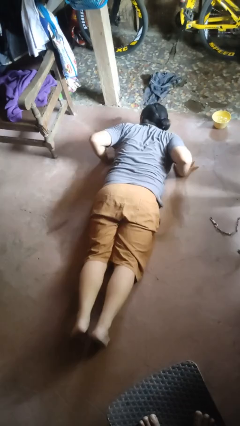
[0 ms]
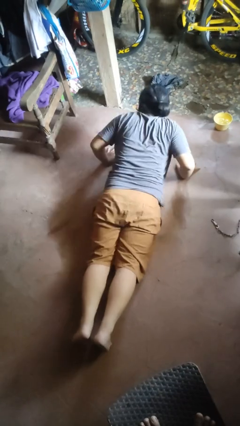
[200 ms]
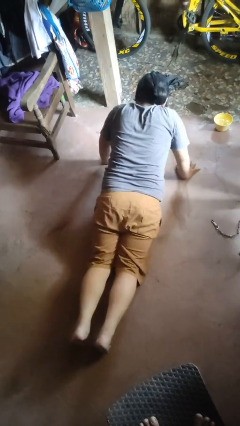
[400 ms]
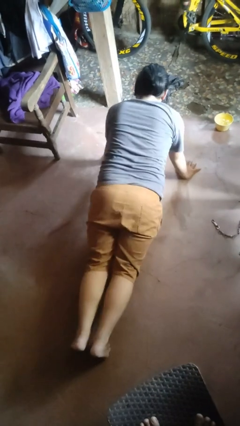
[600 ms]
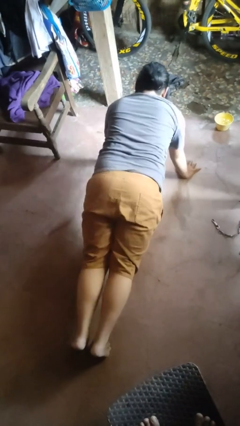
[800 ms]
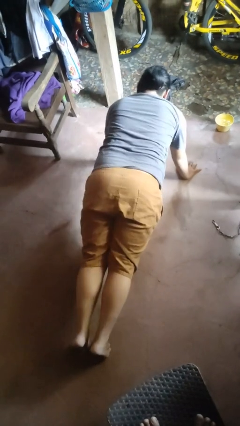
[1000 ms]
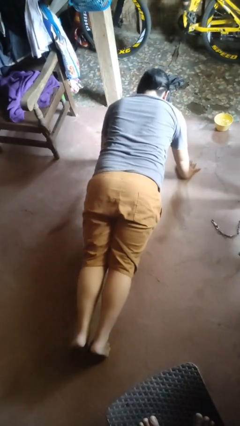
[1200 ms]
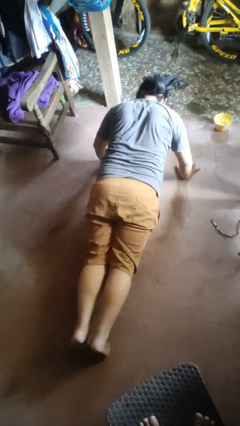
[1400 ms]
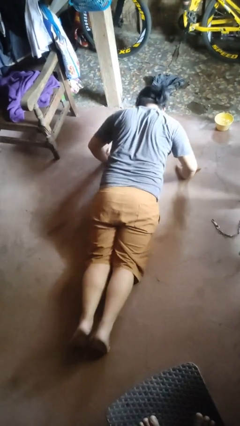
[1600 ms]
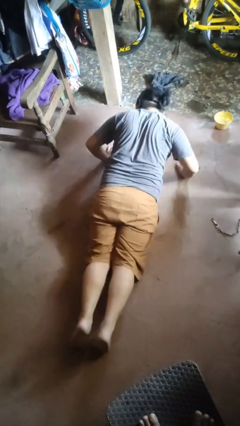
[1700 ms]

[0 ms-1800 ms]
person exercises with pushup

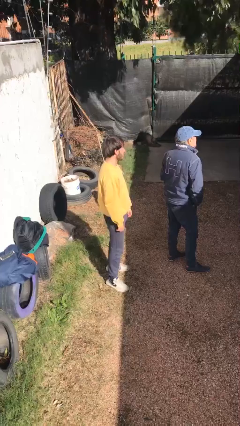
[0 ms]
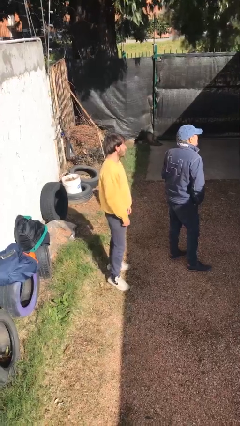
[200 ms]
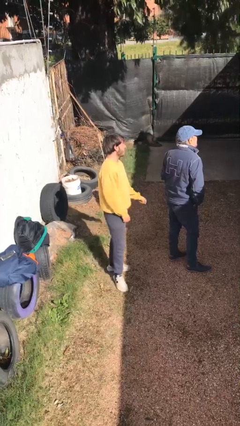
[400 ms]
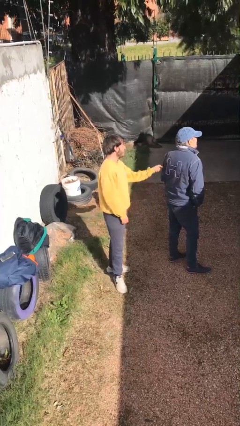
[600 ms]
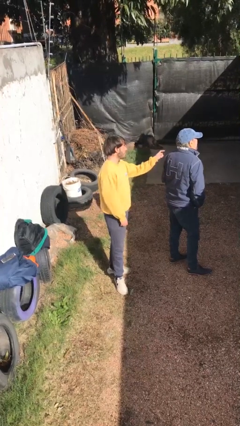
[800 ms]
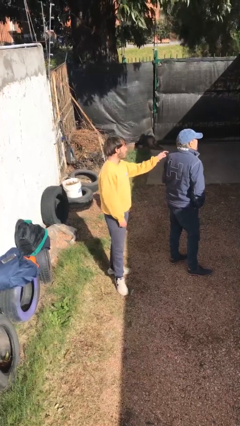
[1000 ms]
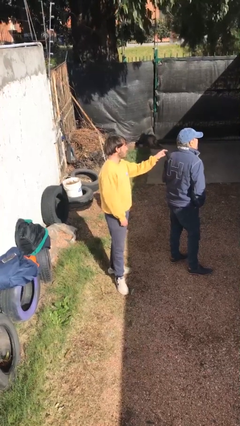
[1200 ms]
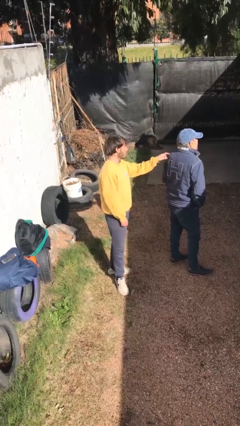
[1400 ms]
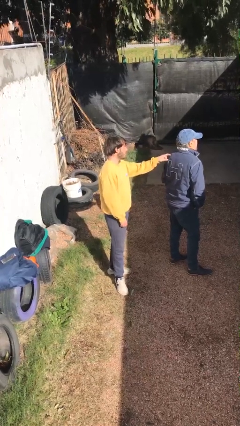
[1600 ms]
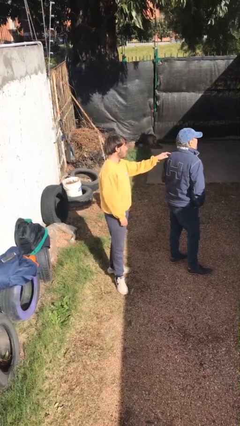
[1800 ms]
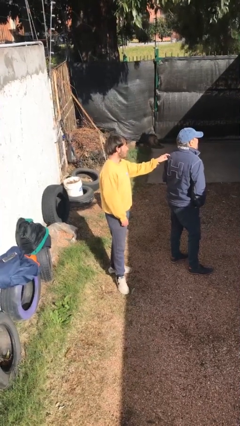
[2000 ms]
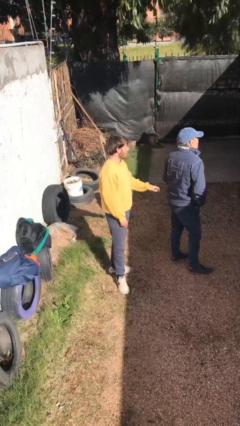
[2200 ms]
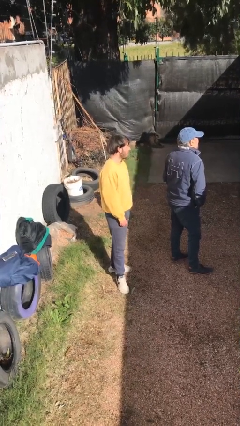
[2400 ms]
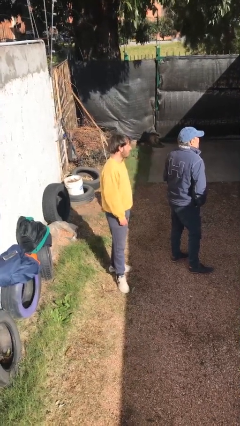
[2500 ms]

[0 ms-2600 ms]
person touches back of person

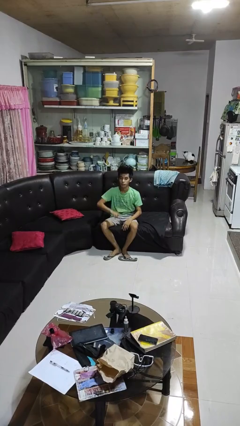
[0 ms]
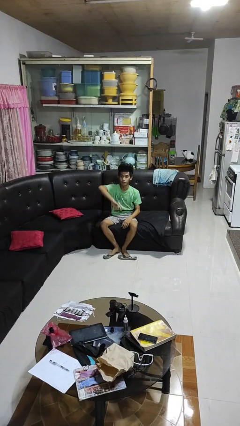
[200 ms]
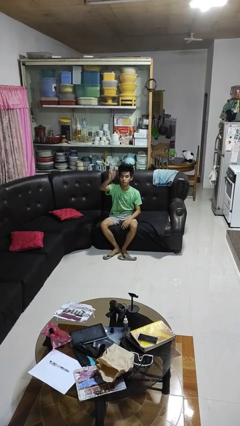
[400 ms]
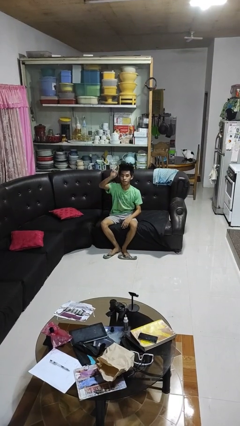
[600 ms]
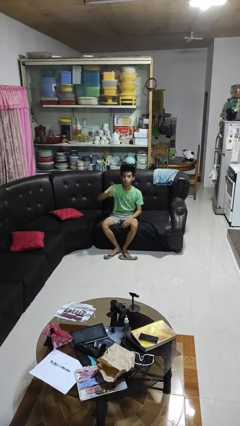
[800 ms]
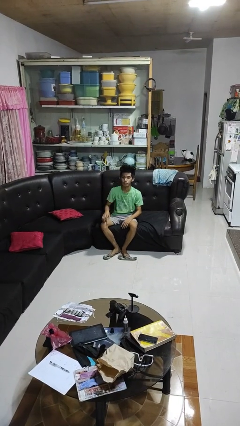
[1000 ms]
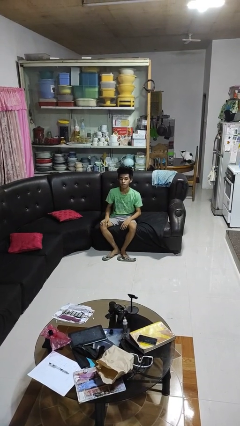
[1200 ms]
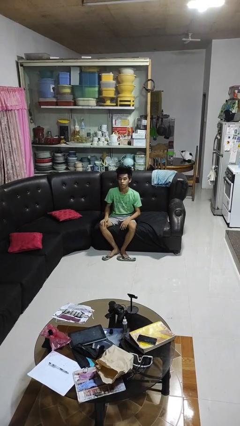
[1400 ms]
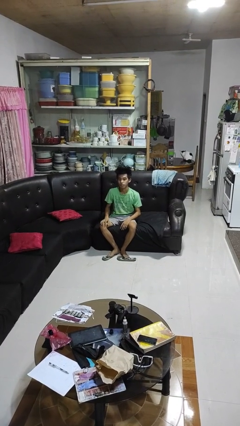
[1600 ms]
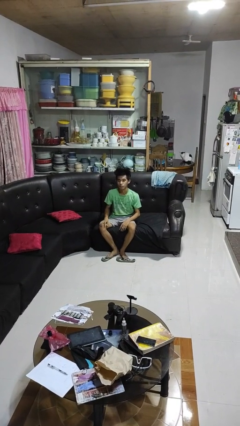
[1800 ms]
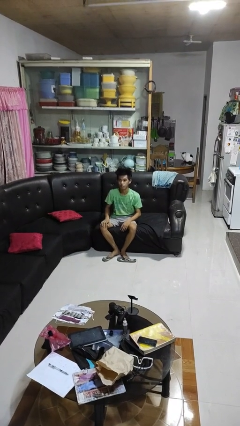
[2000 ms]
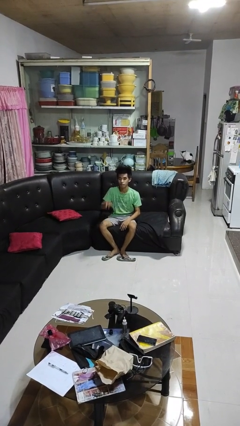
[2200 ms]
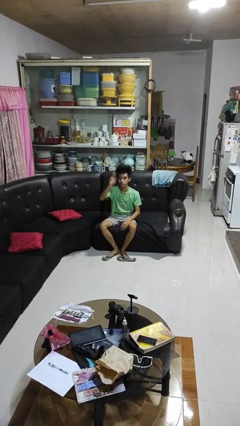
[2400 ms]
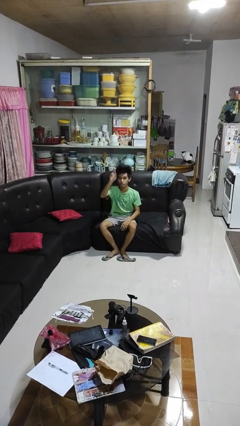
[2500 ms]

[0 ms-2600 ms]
person gestures swipe up

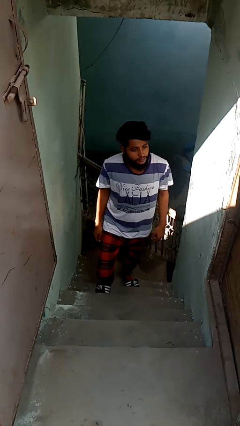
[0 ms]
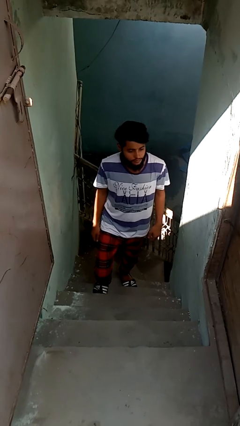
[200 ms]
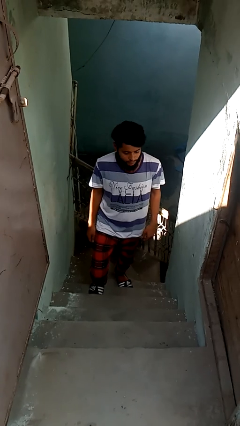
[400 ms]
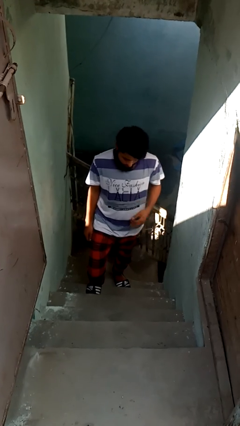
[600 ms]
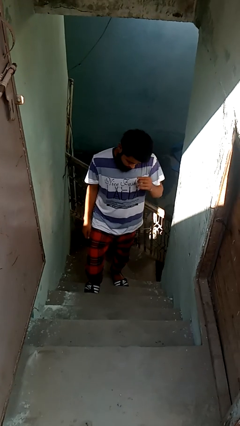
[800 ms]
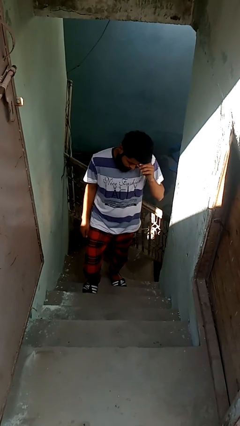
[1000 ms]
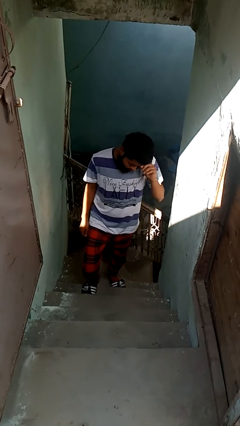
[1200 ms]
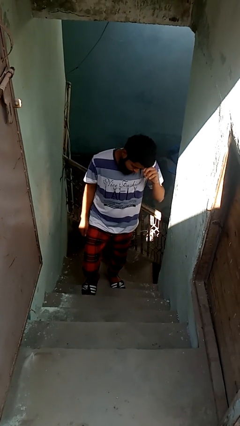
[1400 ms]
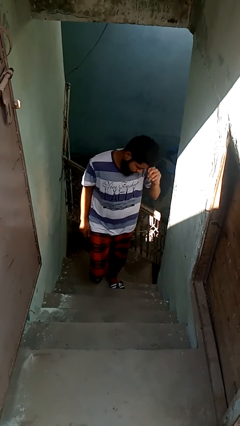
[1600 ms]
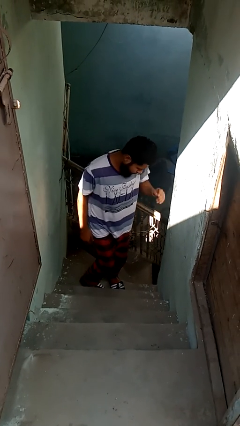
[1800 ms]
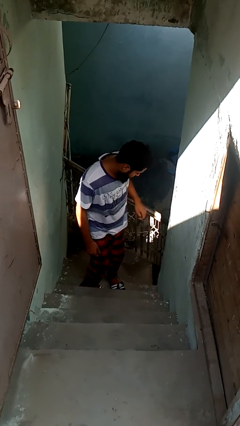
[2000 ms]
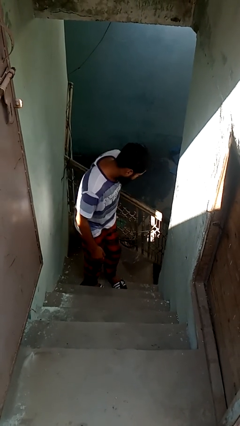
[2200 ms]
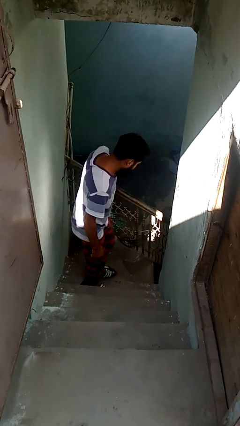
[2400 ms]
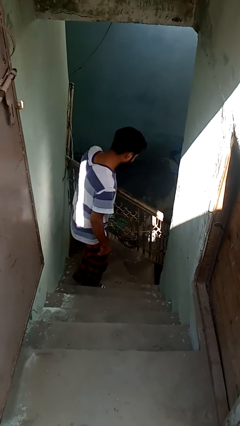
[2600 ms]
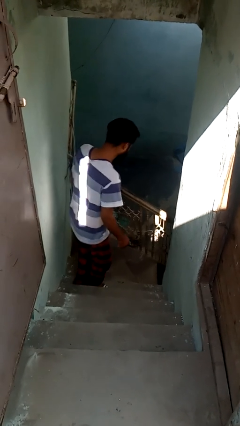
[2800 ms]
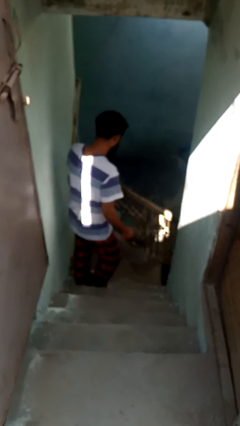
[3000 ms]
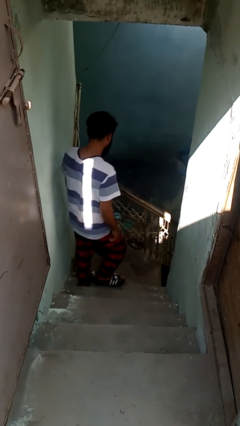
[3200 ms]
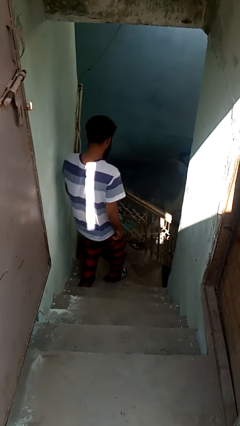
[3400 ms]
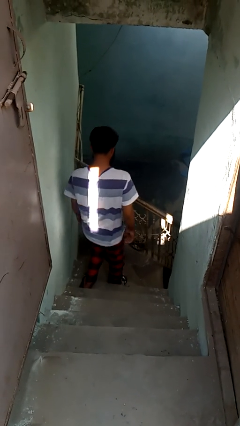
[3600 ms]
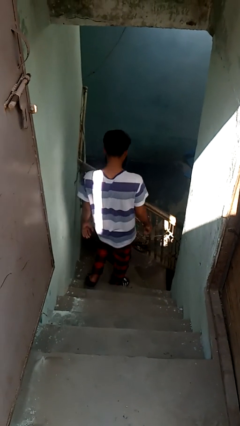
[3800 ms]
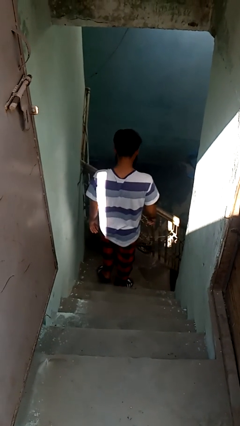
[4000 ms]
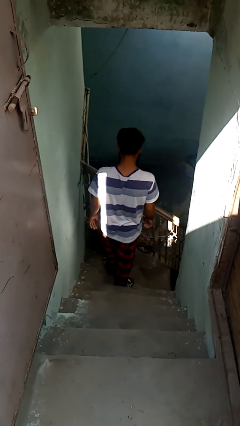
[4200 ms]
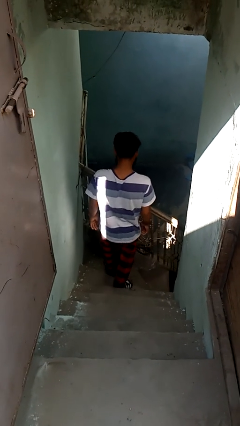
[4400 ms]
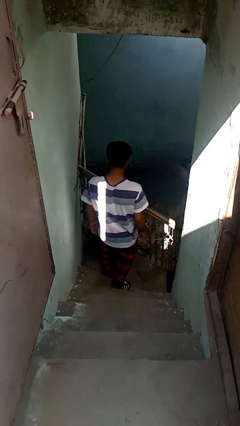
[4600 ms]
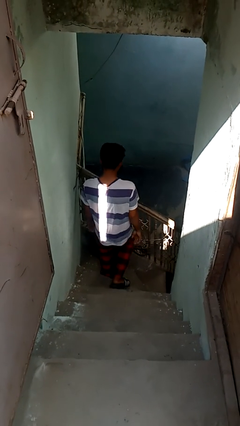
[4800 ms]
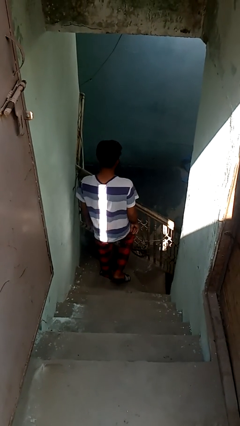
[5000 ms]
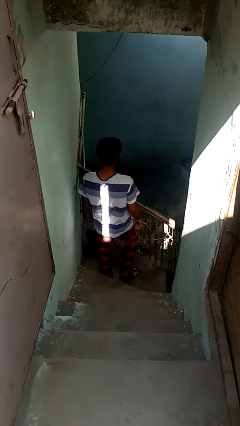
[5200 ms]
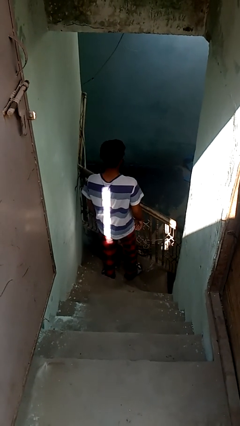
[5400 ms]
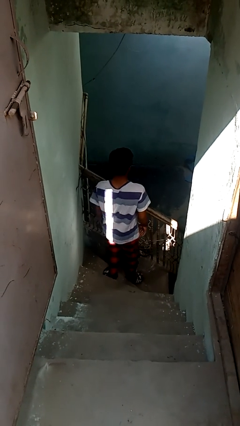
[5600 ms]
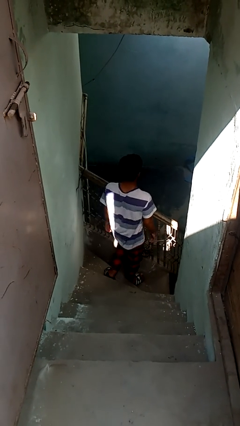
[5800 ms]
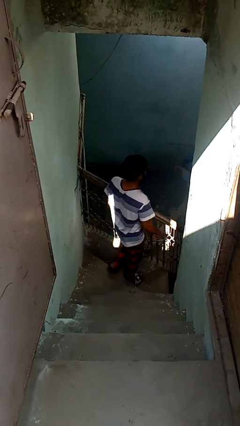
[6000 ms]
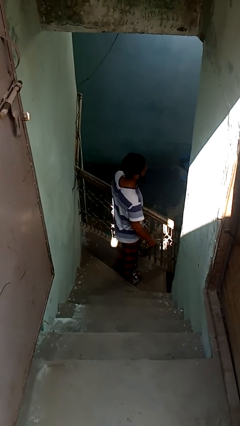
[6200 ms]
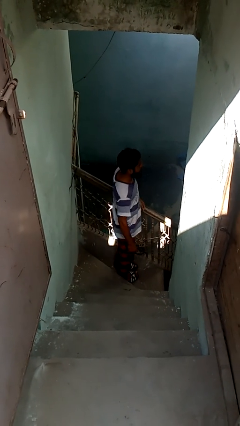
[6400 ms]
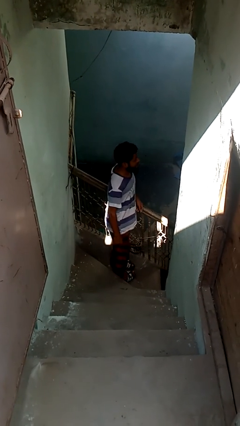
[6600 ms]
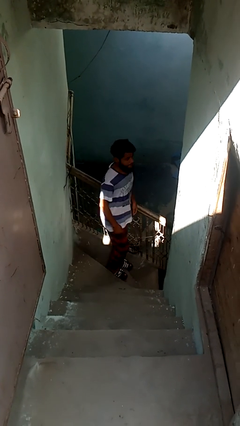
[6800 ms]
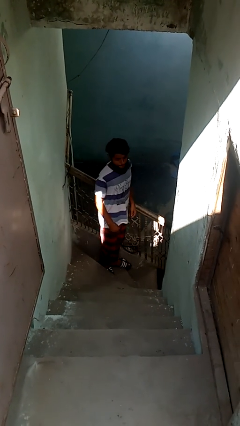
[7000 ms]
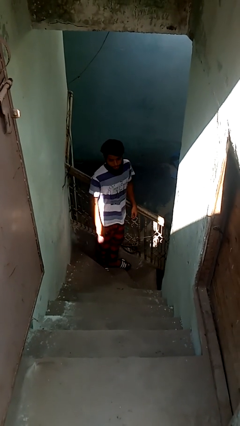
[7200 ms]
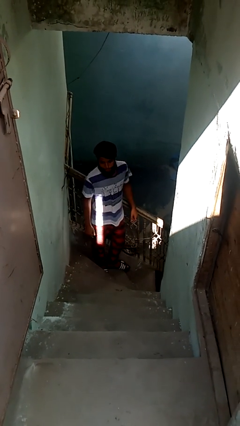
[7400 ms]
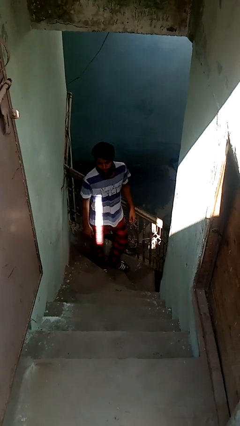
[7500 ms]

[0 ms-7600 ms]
person climbs down stairs

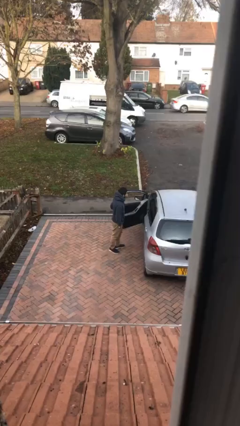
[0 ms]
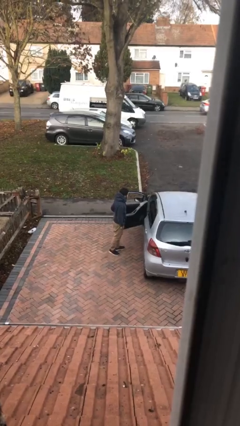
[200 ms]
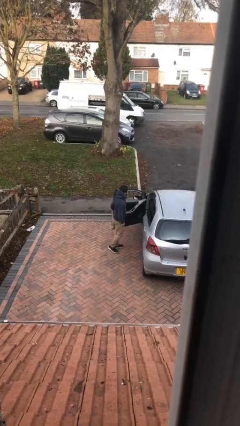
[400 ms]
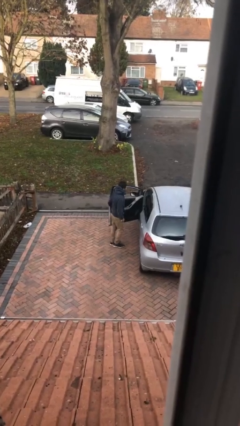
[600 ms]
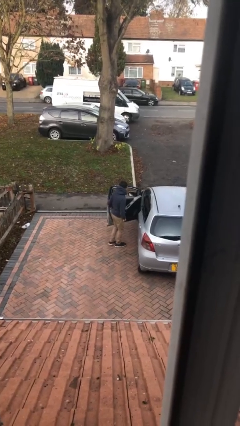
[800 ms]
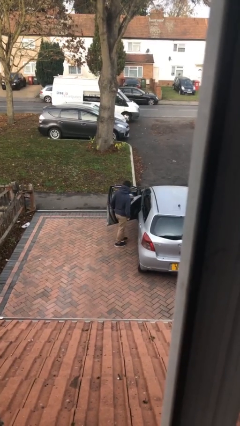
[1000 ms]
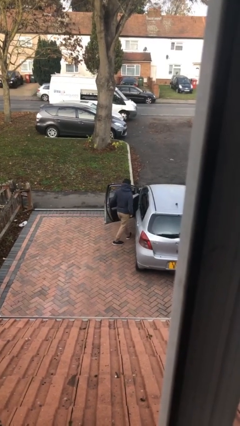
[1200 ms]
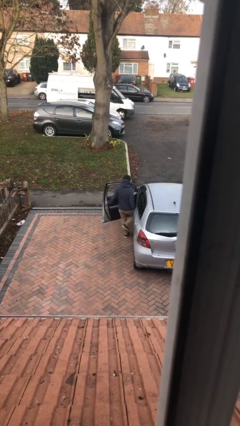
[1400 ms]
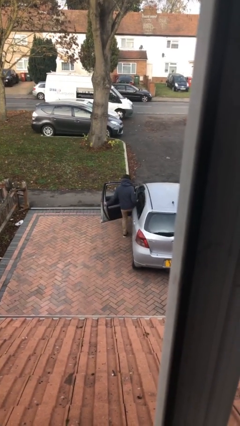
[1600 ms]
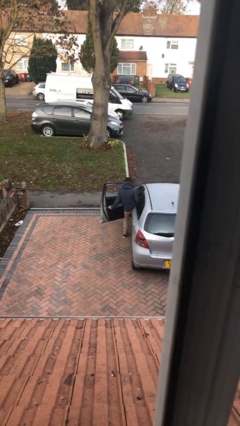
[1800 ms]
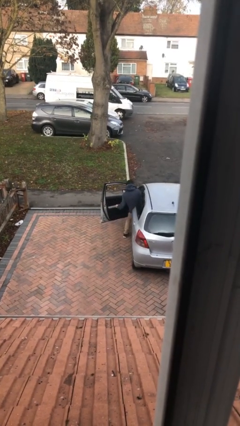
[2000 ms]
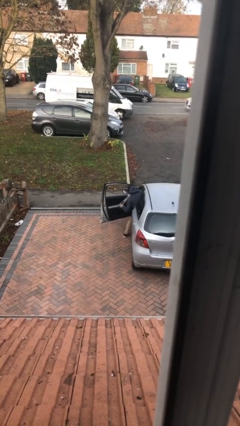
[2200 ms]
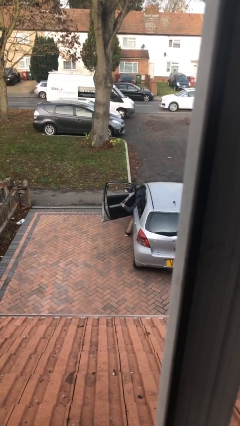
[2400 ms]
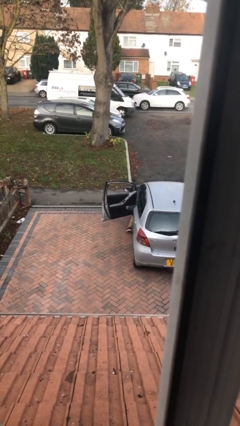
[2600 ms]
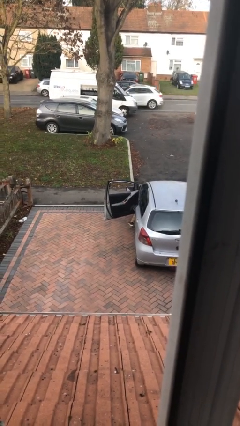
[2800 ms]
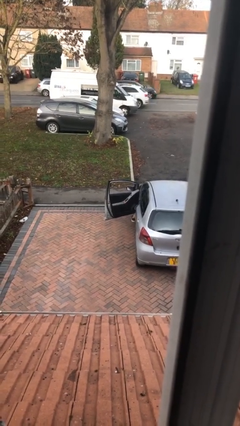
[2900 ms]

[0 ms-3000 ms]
person enters car
